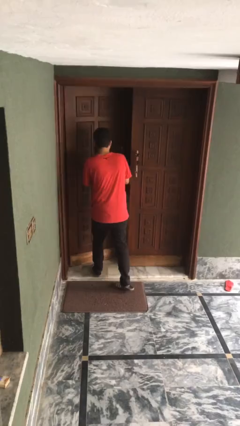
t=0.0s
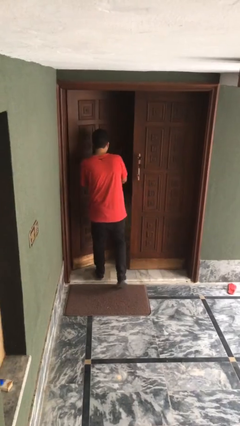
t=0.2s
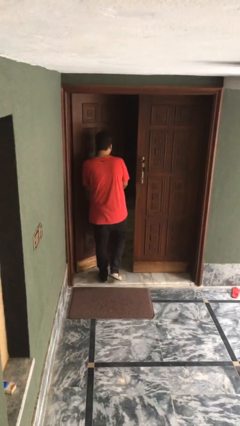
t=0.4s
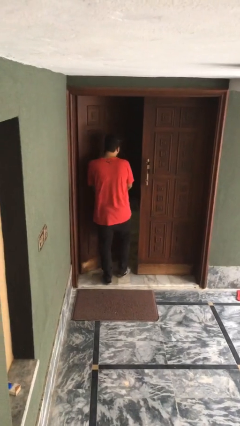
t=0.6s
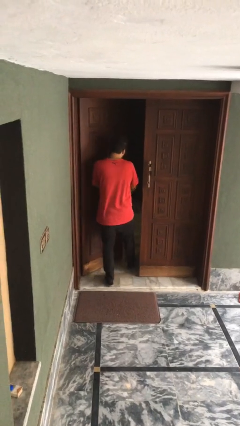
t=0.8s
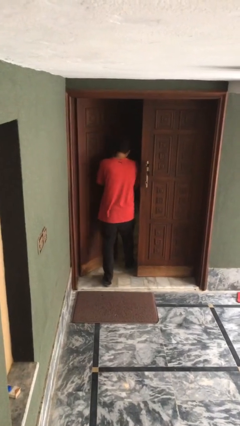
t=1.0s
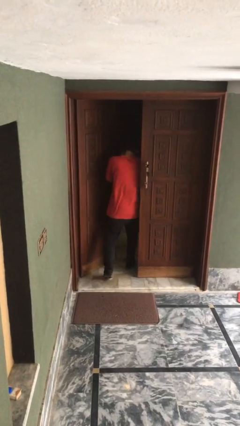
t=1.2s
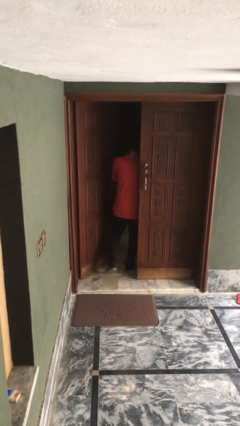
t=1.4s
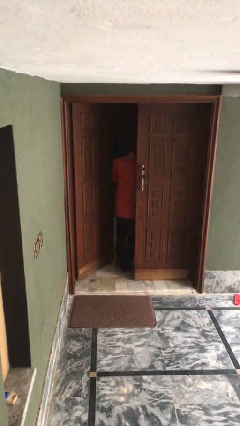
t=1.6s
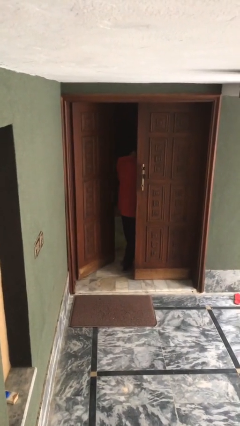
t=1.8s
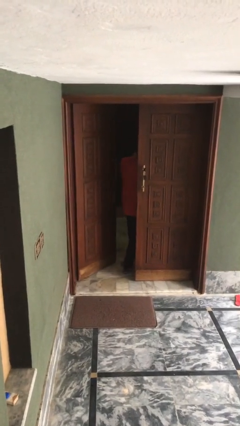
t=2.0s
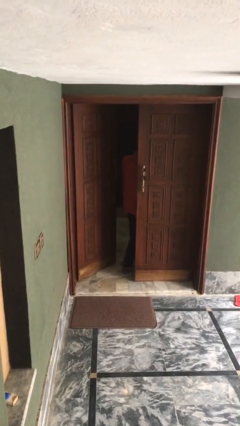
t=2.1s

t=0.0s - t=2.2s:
person exits scene through structure

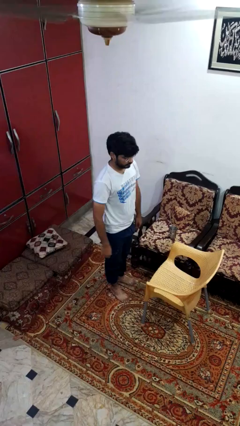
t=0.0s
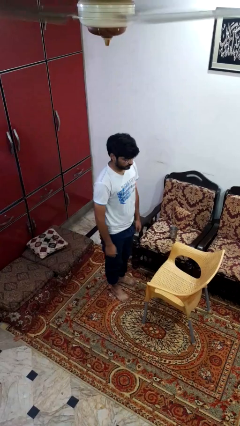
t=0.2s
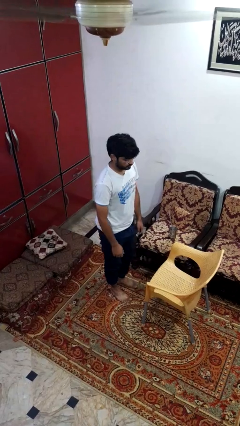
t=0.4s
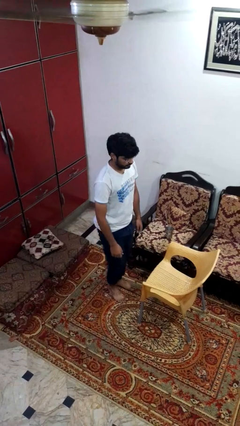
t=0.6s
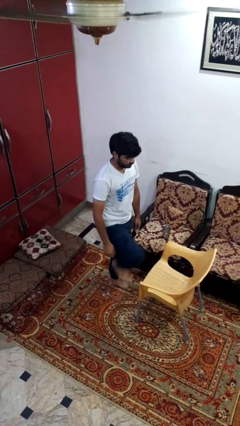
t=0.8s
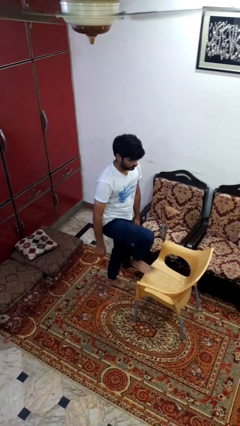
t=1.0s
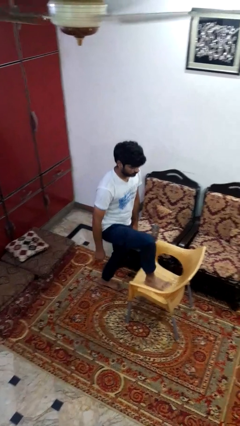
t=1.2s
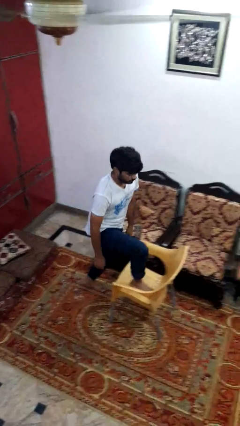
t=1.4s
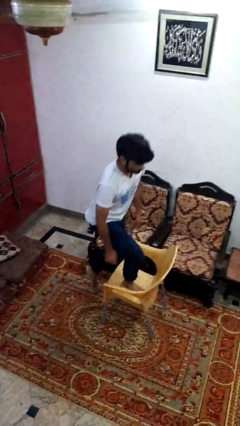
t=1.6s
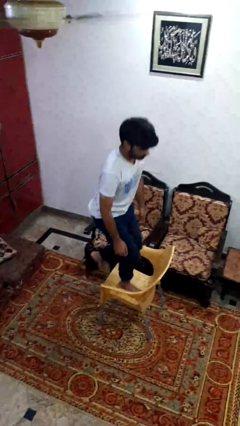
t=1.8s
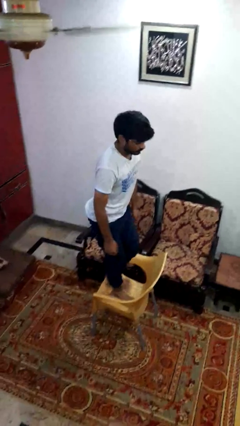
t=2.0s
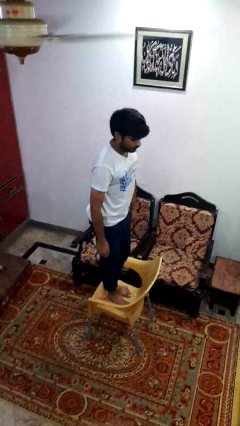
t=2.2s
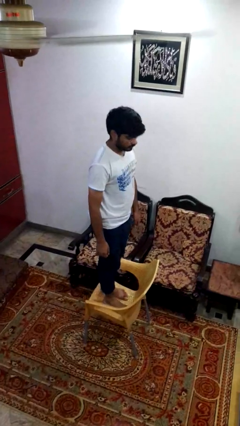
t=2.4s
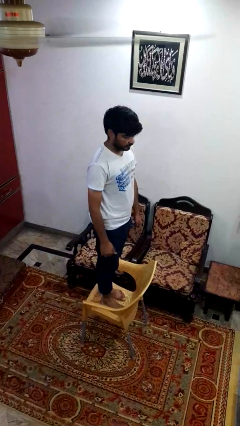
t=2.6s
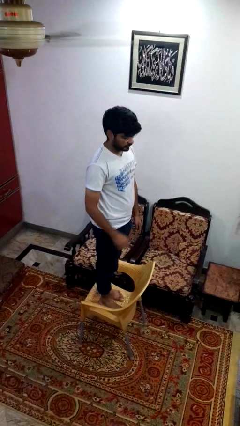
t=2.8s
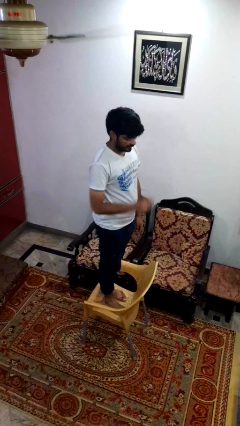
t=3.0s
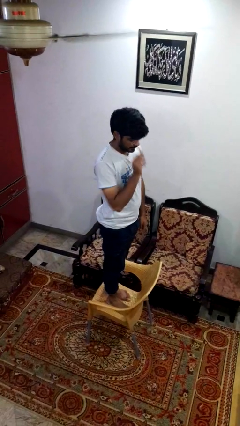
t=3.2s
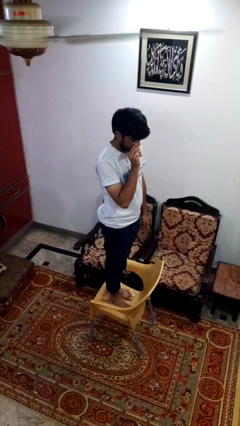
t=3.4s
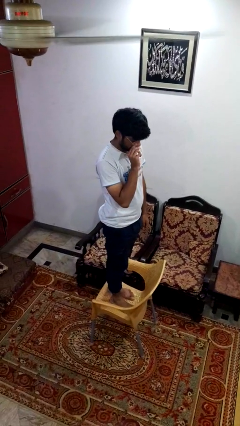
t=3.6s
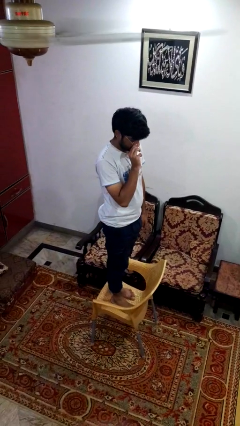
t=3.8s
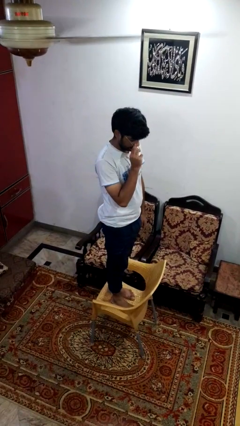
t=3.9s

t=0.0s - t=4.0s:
person climbs on chair

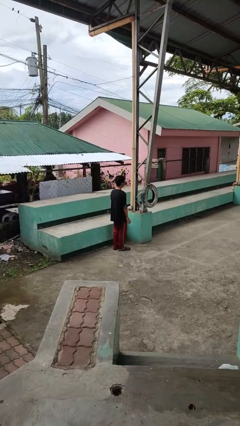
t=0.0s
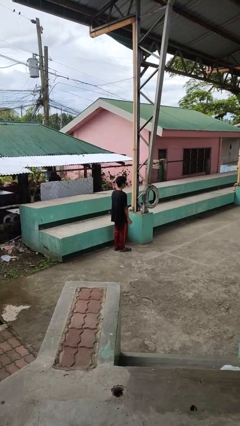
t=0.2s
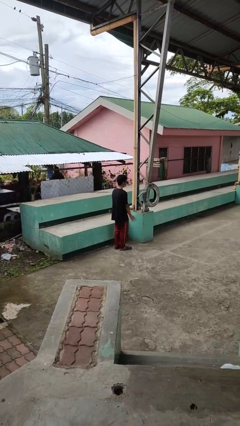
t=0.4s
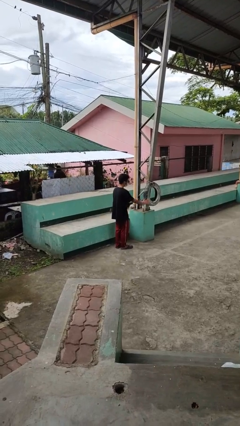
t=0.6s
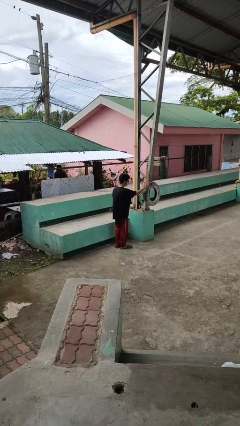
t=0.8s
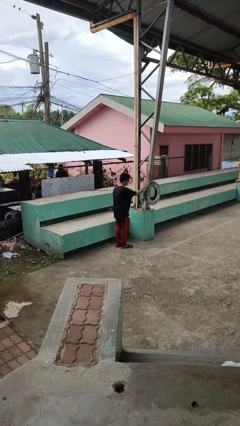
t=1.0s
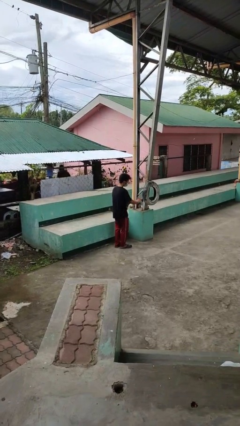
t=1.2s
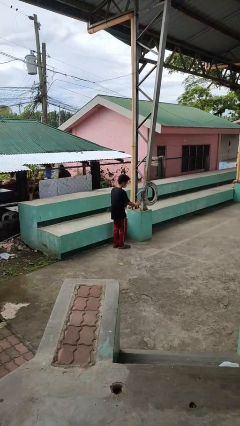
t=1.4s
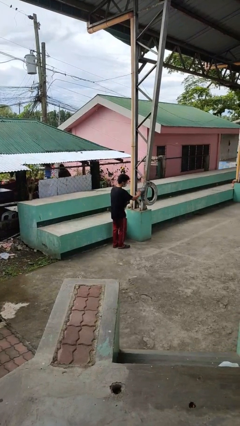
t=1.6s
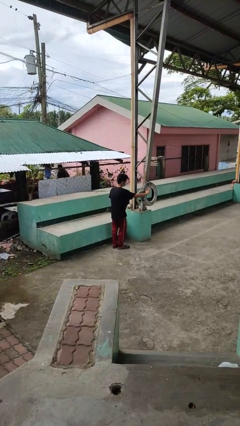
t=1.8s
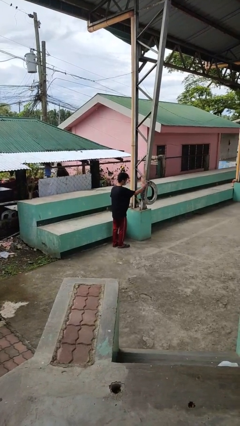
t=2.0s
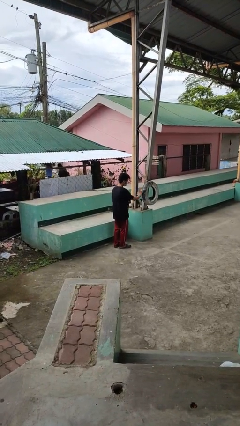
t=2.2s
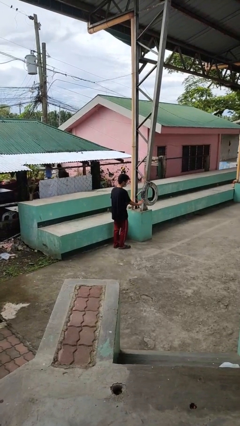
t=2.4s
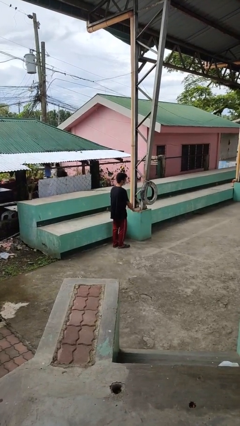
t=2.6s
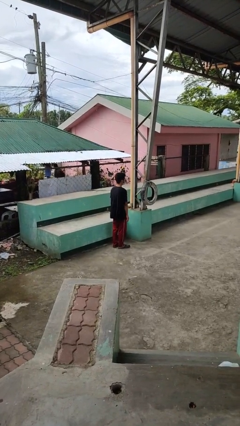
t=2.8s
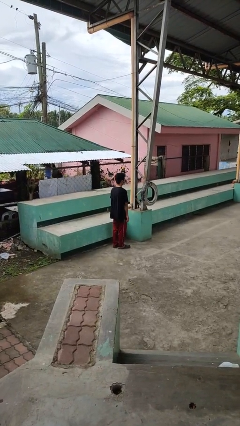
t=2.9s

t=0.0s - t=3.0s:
person waves hand over object

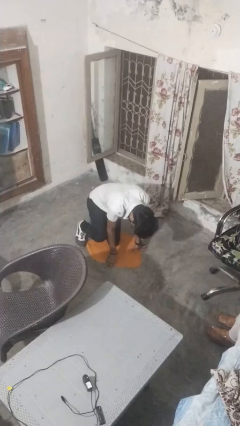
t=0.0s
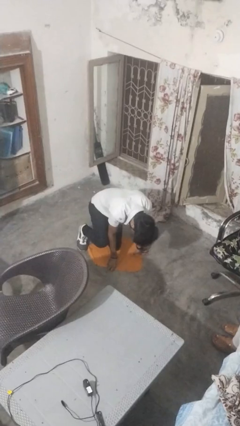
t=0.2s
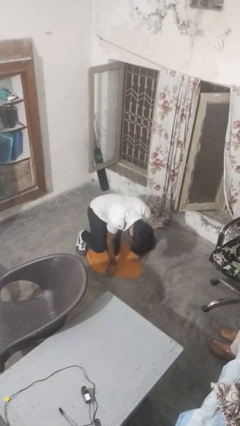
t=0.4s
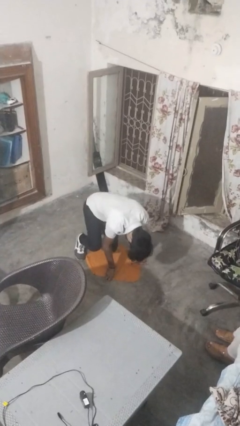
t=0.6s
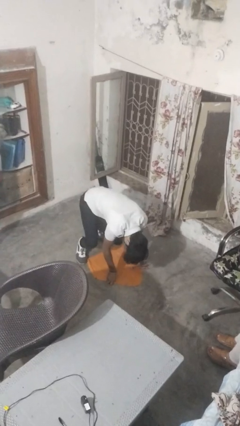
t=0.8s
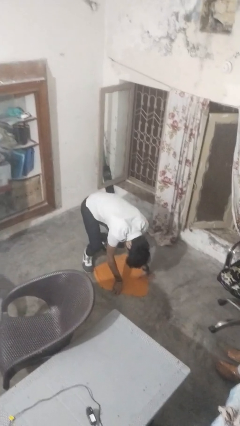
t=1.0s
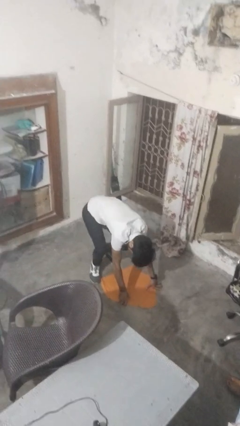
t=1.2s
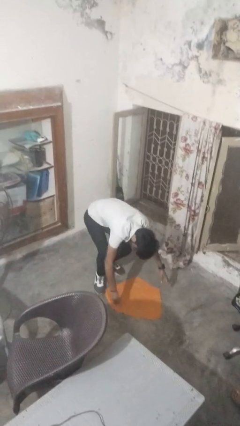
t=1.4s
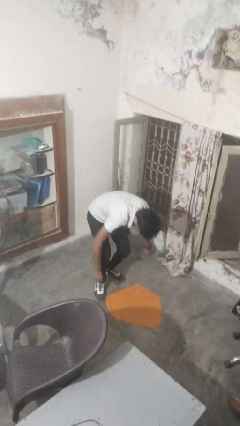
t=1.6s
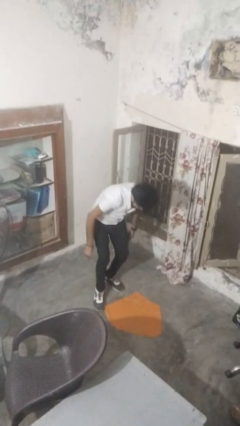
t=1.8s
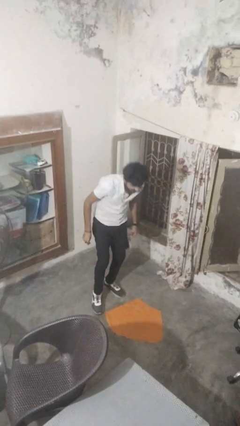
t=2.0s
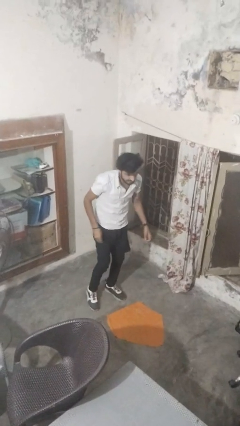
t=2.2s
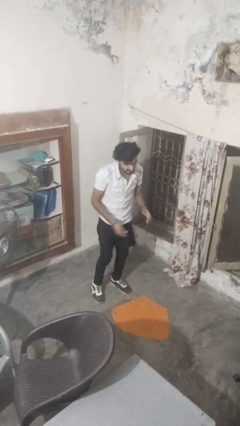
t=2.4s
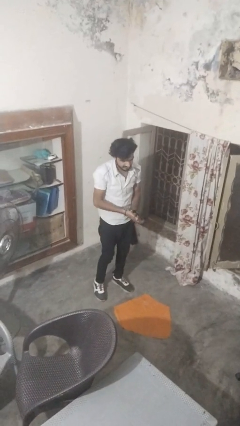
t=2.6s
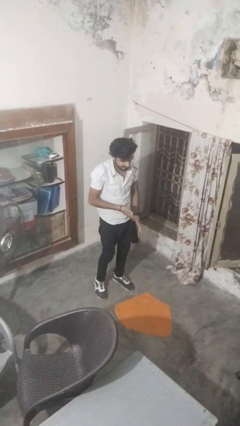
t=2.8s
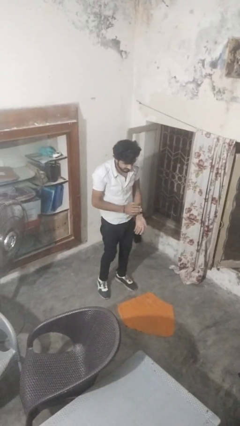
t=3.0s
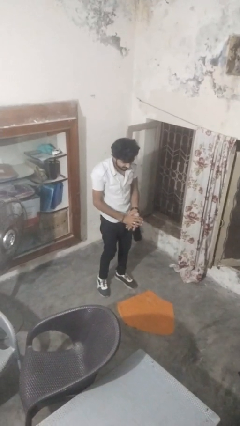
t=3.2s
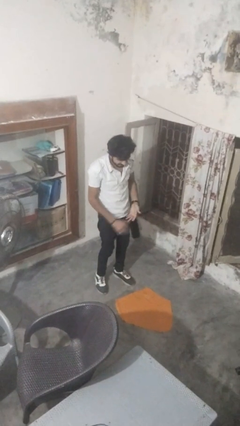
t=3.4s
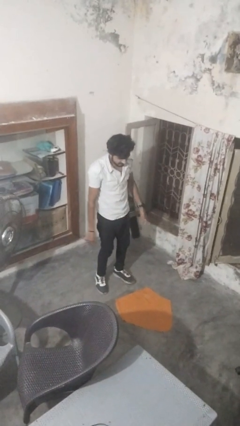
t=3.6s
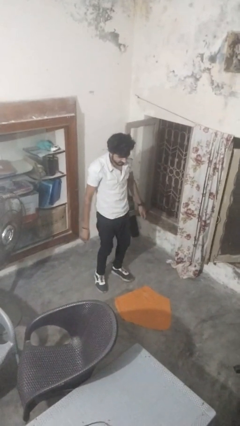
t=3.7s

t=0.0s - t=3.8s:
person stands up from floor

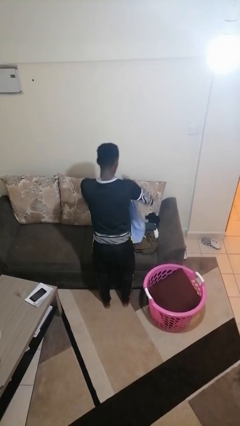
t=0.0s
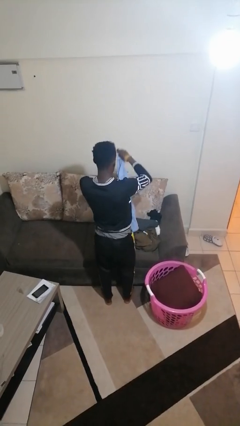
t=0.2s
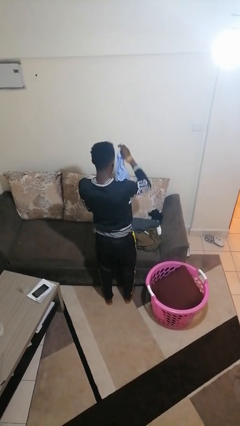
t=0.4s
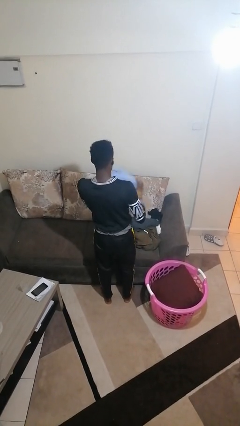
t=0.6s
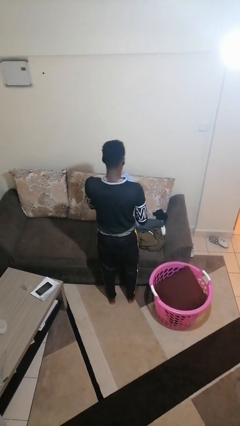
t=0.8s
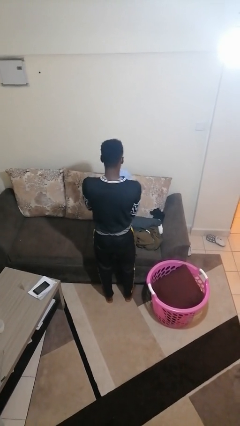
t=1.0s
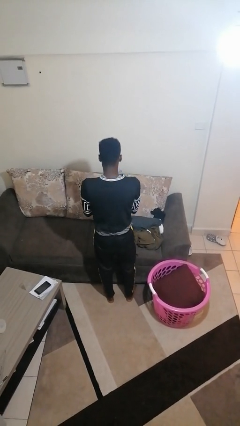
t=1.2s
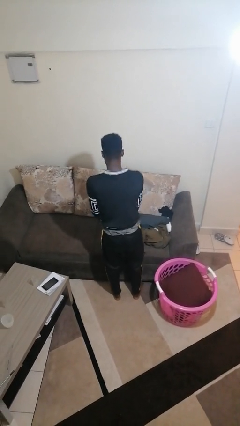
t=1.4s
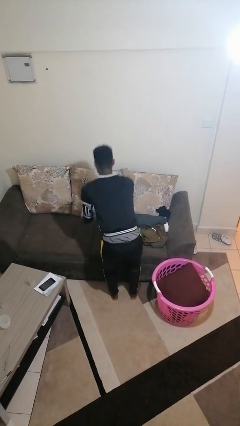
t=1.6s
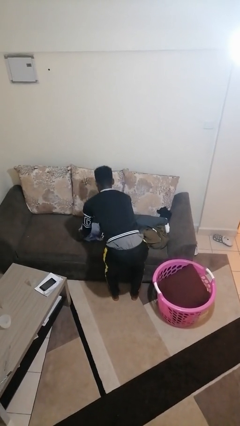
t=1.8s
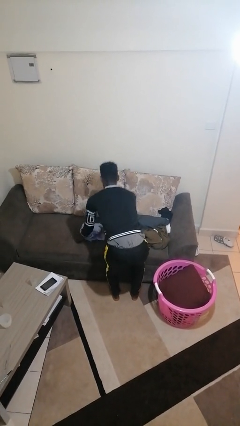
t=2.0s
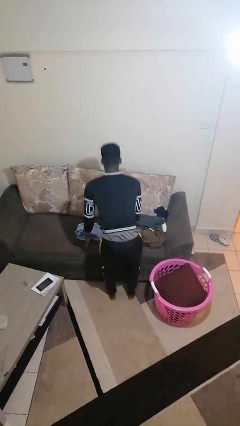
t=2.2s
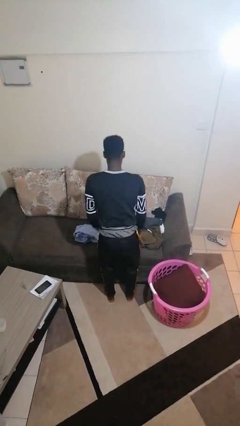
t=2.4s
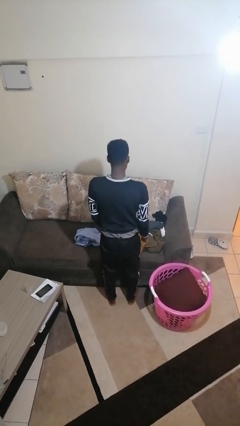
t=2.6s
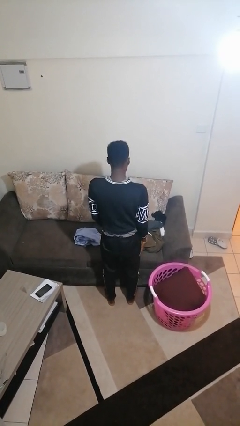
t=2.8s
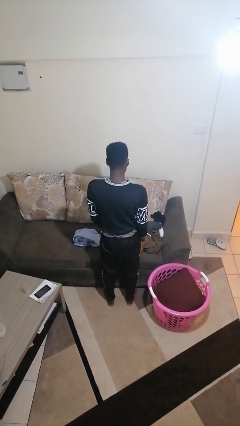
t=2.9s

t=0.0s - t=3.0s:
person folds shirt

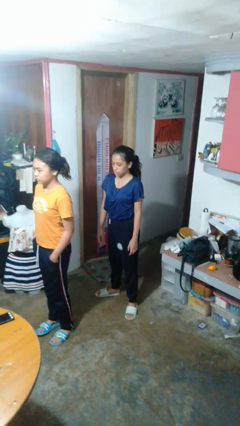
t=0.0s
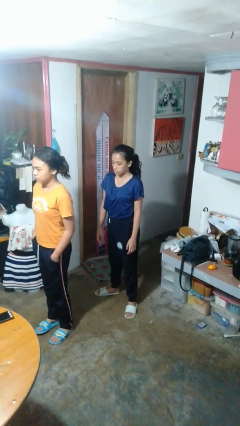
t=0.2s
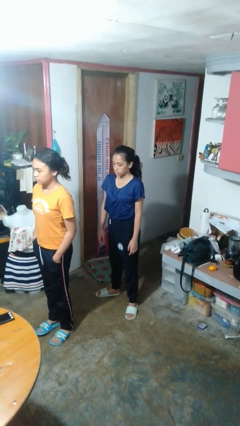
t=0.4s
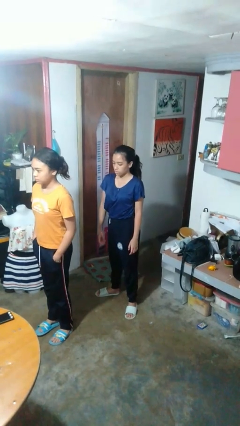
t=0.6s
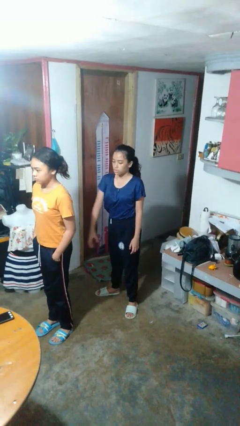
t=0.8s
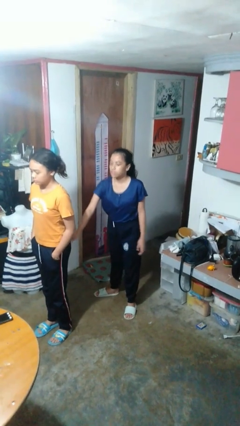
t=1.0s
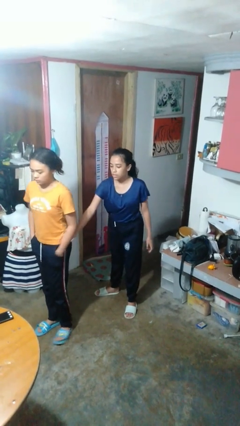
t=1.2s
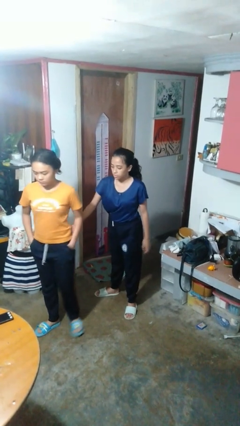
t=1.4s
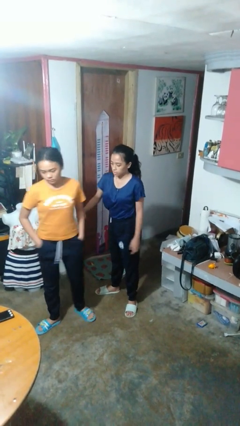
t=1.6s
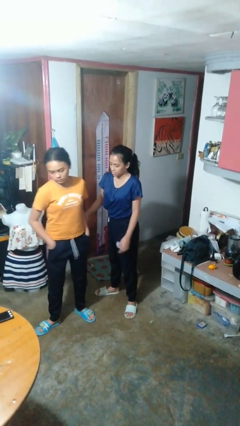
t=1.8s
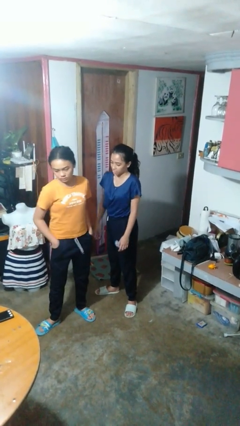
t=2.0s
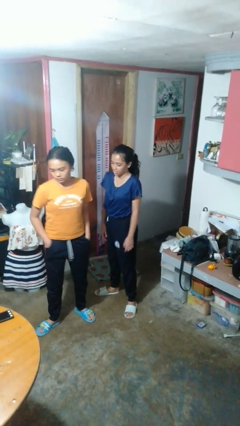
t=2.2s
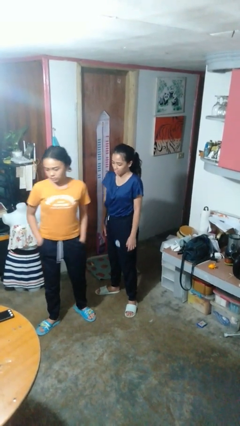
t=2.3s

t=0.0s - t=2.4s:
person grabs person by forearm
